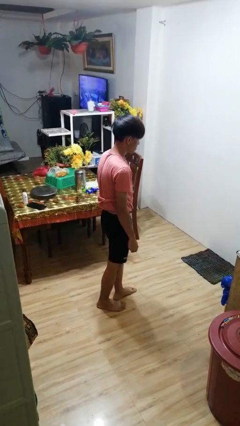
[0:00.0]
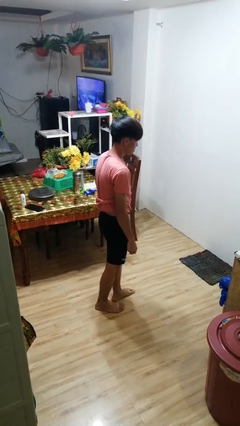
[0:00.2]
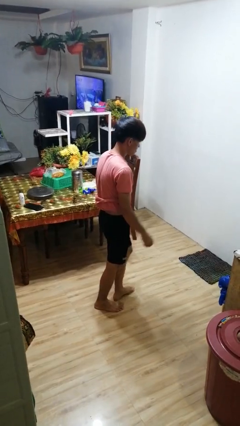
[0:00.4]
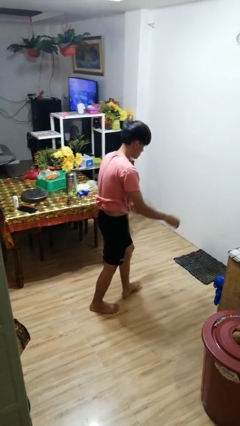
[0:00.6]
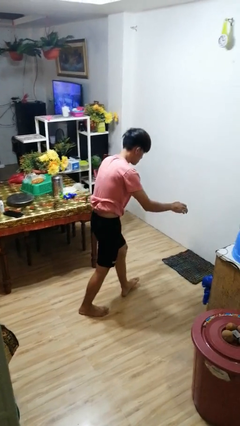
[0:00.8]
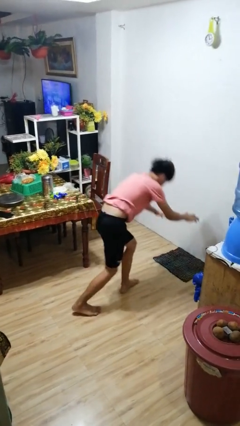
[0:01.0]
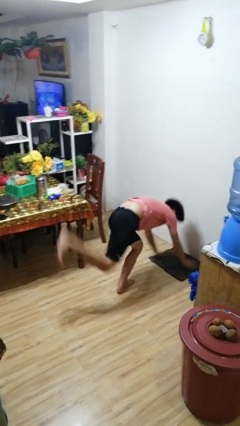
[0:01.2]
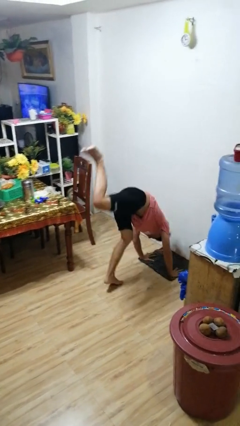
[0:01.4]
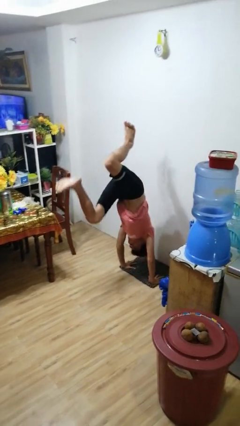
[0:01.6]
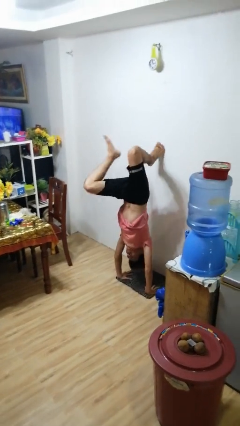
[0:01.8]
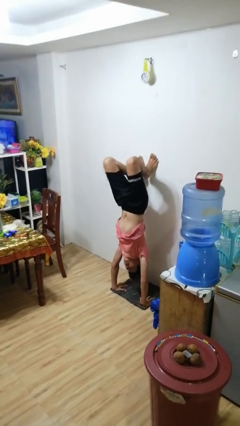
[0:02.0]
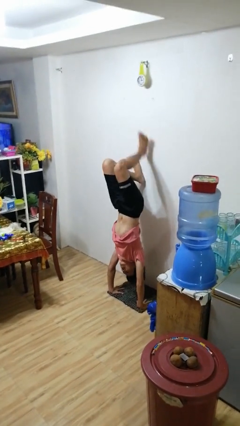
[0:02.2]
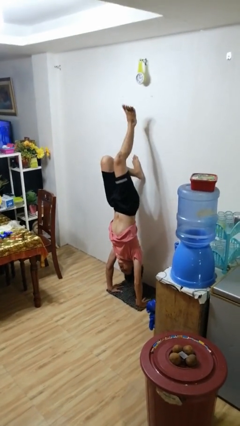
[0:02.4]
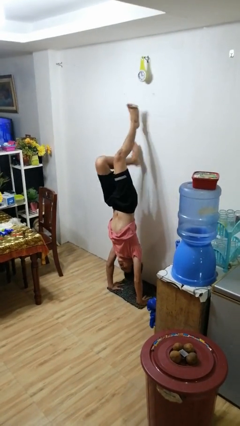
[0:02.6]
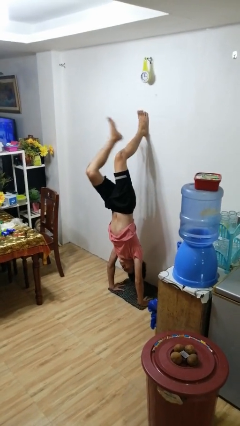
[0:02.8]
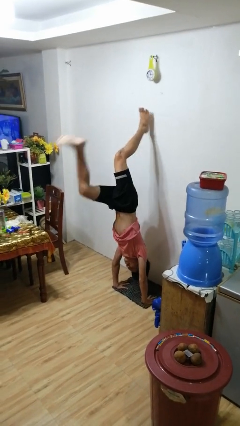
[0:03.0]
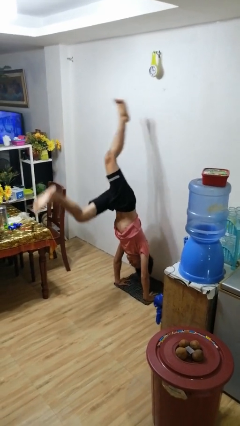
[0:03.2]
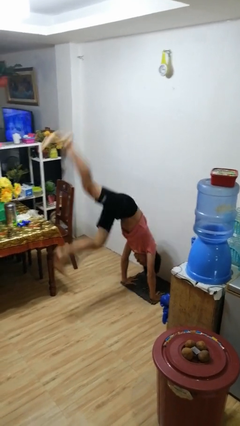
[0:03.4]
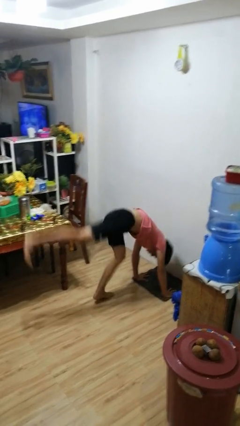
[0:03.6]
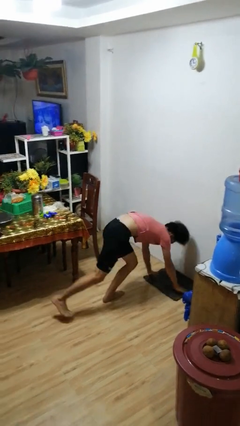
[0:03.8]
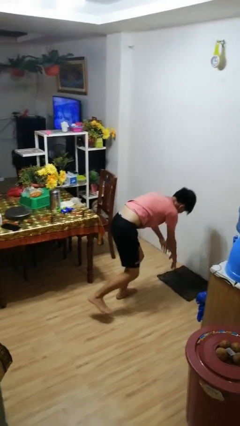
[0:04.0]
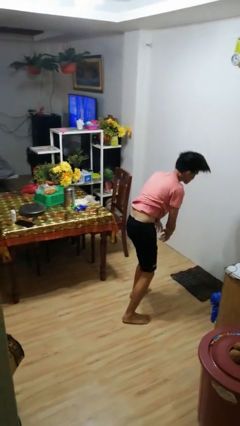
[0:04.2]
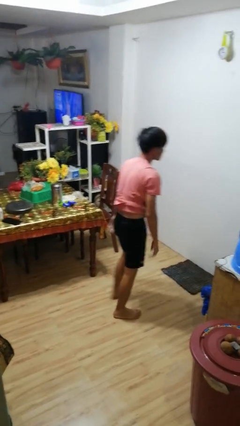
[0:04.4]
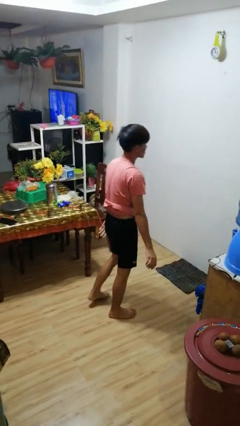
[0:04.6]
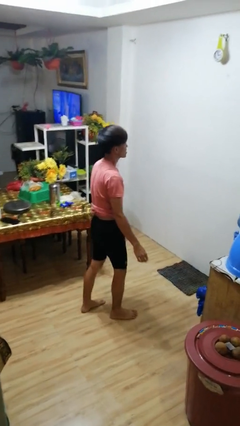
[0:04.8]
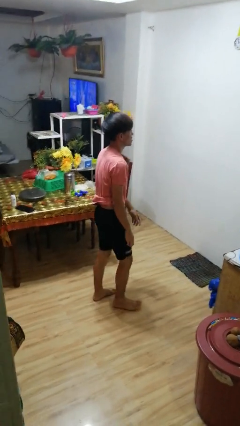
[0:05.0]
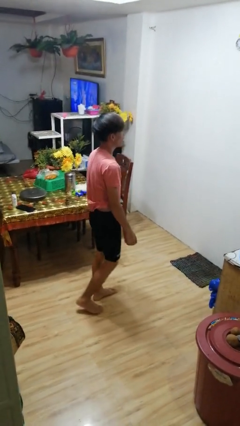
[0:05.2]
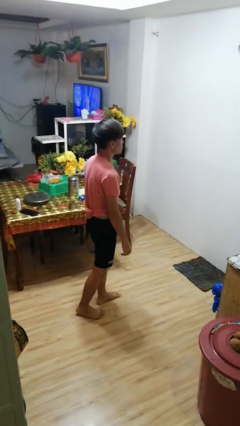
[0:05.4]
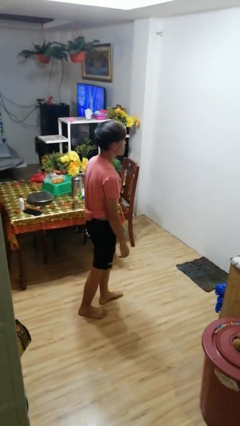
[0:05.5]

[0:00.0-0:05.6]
person handstand

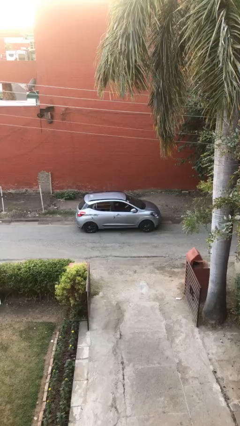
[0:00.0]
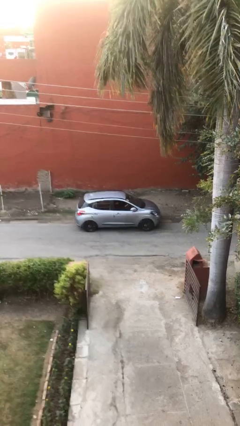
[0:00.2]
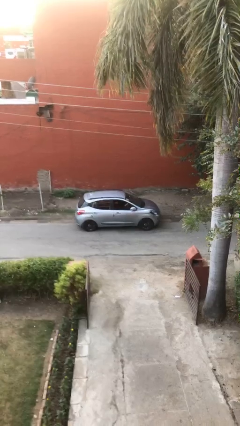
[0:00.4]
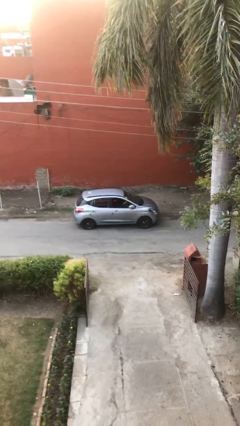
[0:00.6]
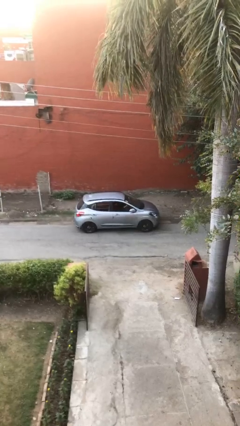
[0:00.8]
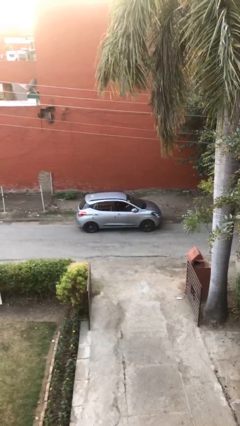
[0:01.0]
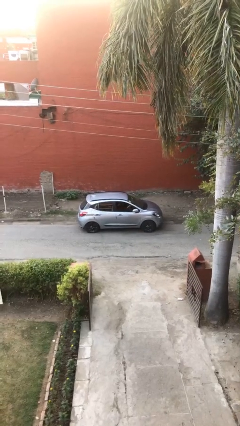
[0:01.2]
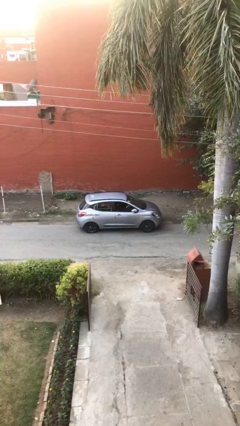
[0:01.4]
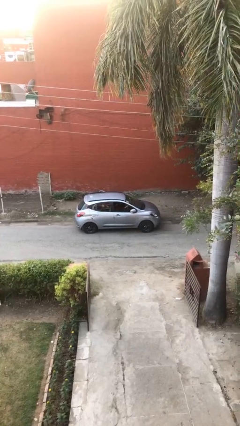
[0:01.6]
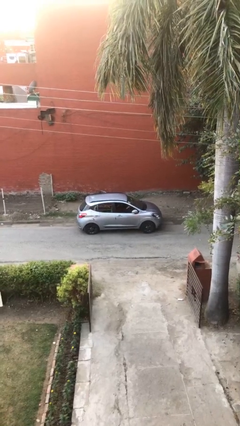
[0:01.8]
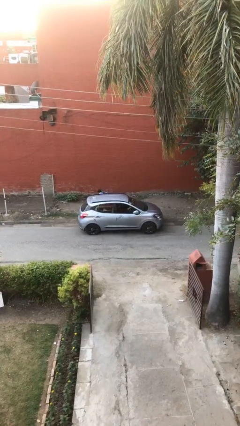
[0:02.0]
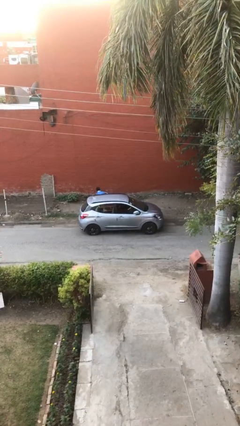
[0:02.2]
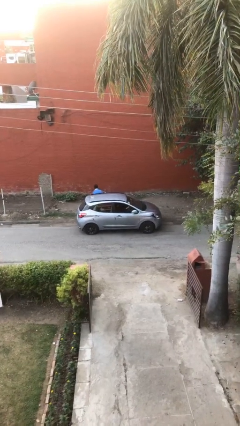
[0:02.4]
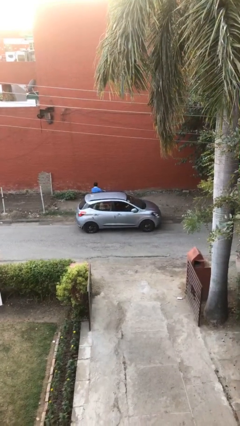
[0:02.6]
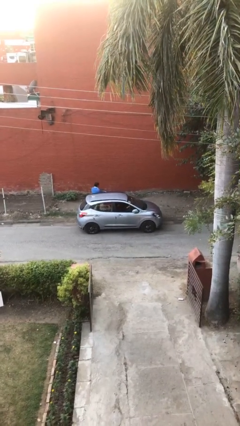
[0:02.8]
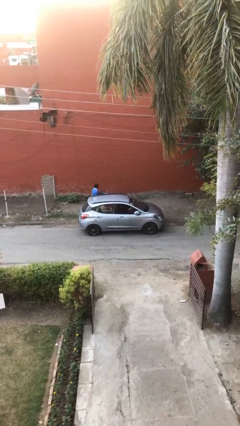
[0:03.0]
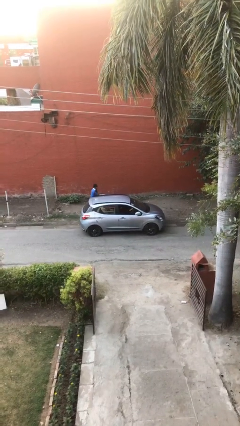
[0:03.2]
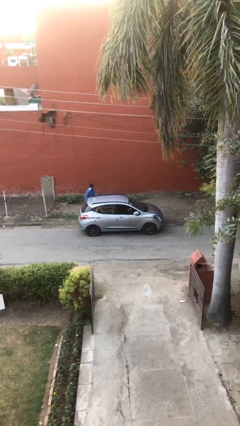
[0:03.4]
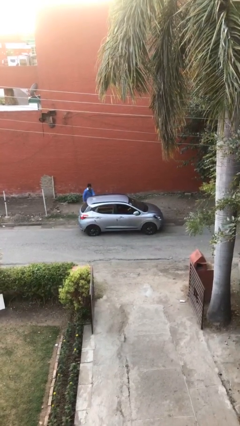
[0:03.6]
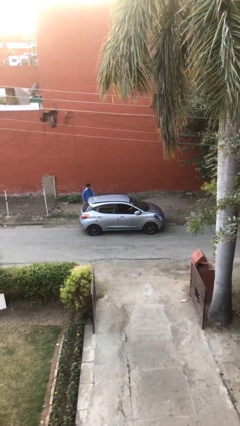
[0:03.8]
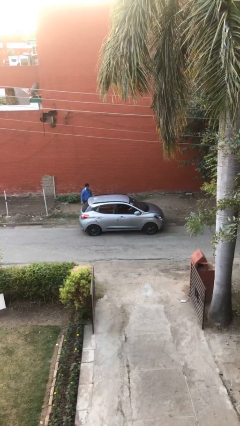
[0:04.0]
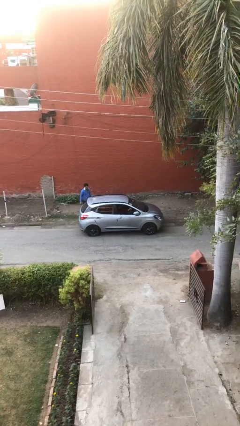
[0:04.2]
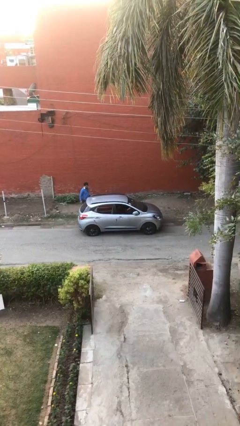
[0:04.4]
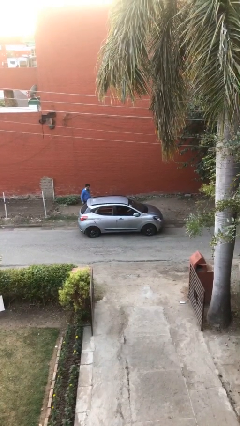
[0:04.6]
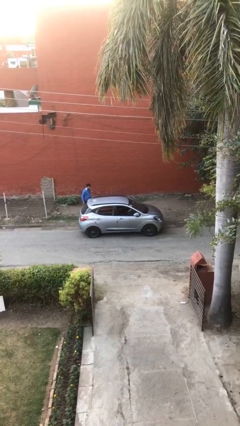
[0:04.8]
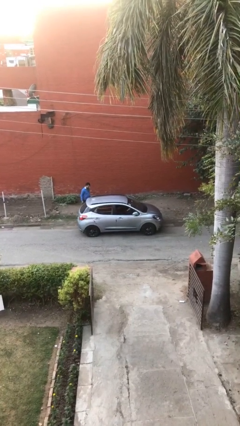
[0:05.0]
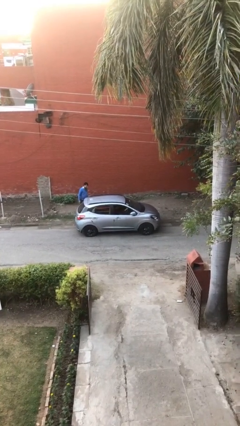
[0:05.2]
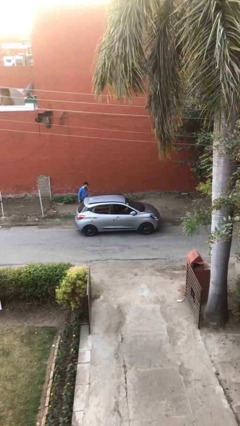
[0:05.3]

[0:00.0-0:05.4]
car drops off person

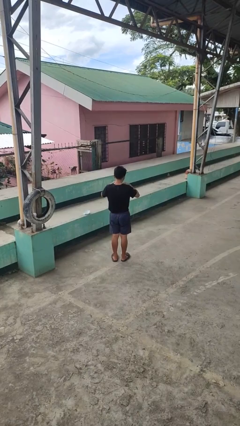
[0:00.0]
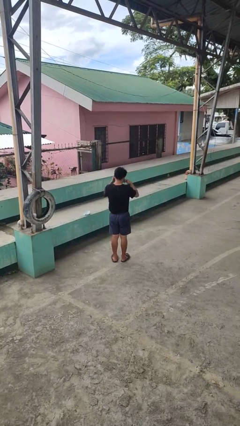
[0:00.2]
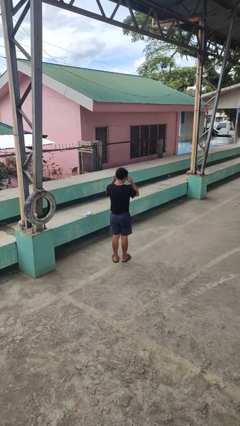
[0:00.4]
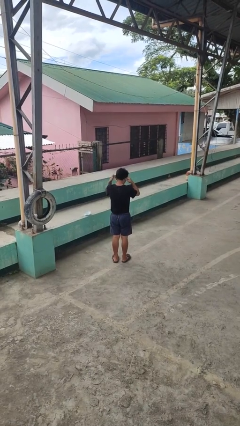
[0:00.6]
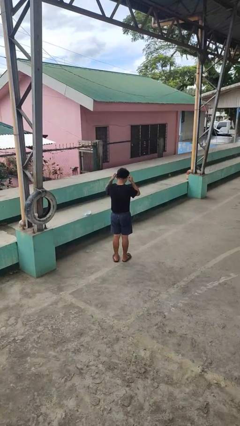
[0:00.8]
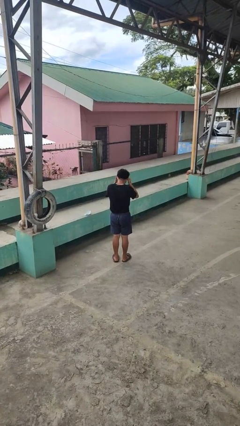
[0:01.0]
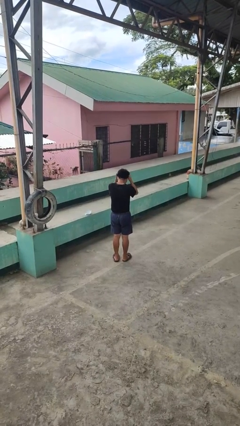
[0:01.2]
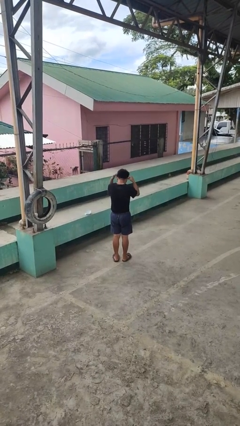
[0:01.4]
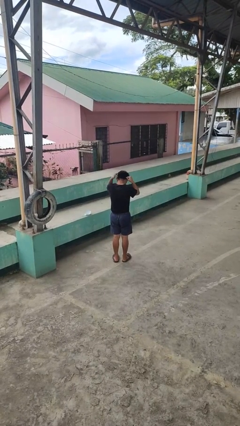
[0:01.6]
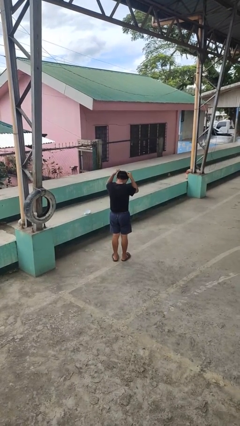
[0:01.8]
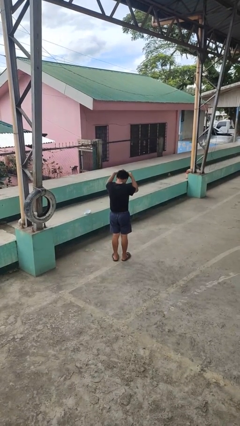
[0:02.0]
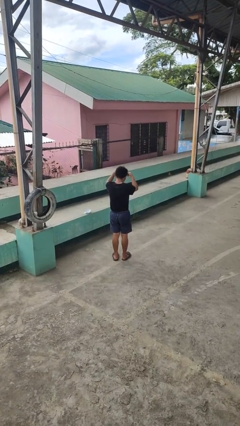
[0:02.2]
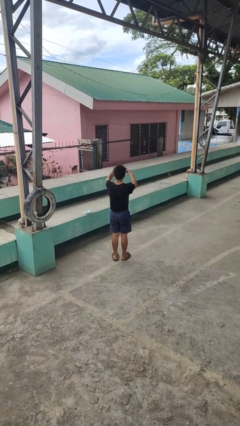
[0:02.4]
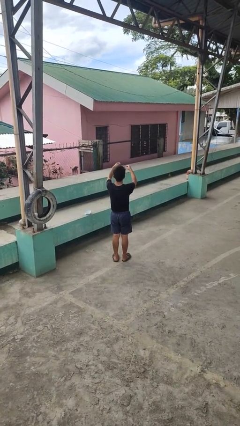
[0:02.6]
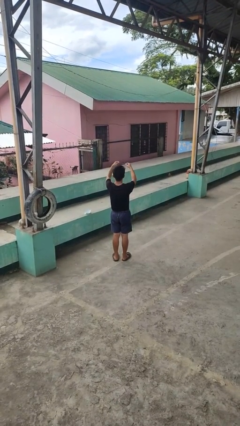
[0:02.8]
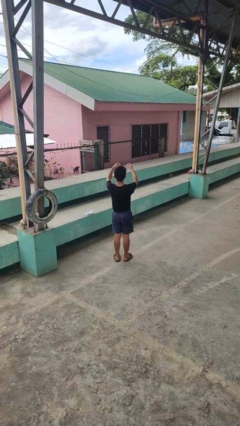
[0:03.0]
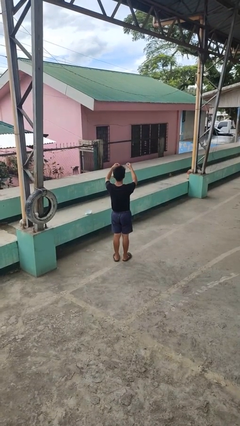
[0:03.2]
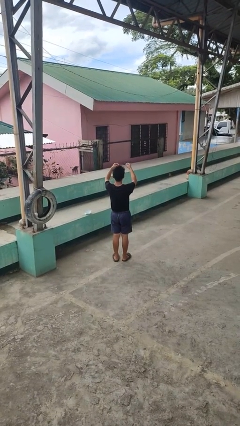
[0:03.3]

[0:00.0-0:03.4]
person takes off necklace

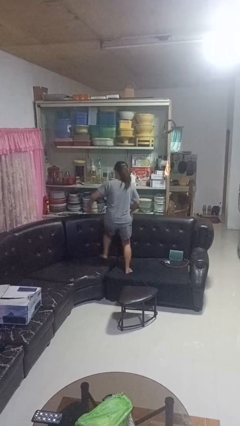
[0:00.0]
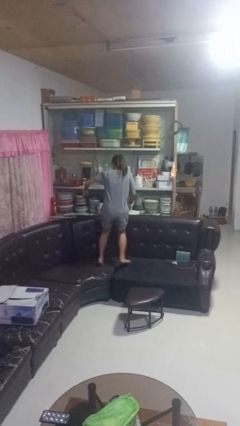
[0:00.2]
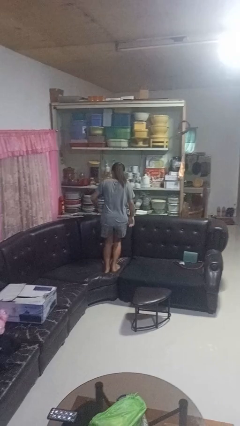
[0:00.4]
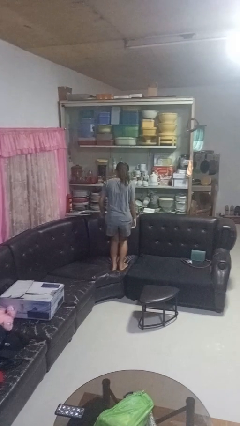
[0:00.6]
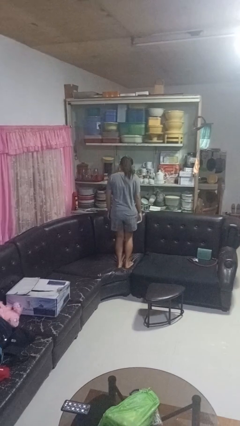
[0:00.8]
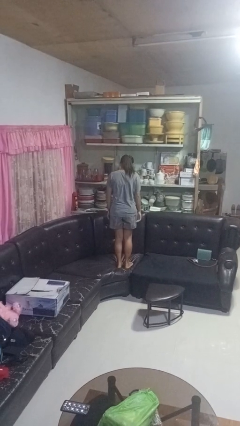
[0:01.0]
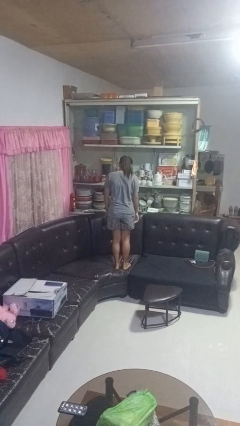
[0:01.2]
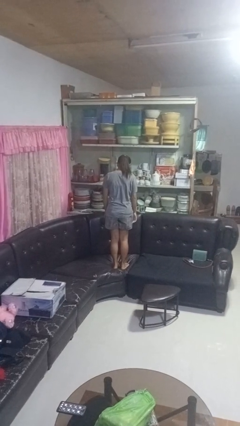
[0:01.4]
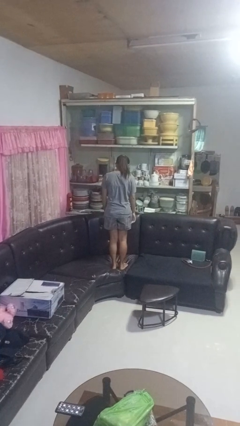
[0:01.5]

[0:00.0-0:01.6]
person jumps on couch

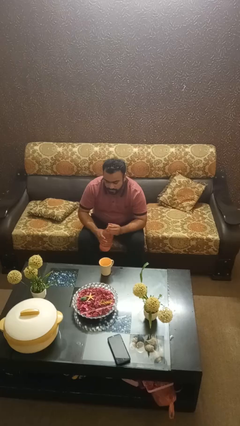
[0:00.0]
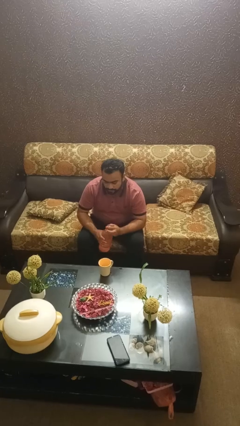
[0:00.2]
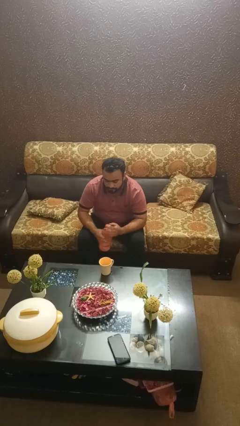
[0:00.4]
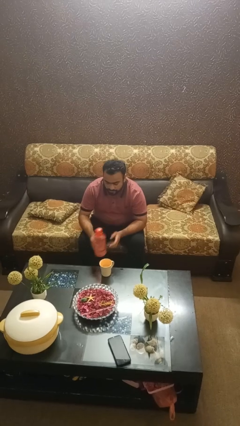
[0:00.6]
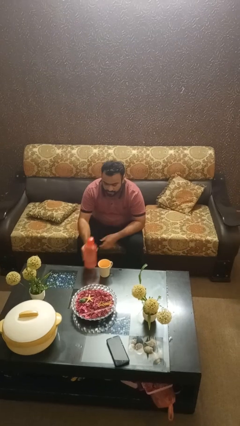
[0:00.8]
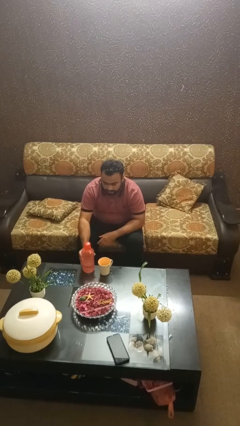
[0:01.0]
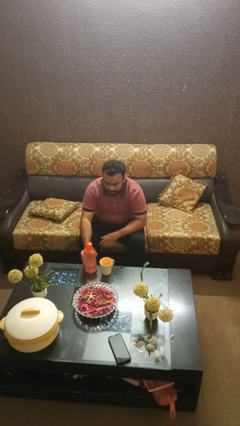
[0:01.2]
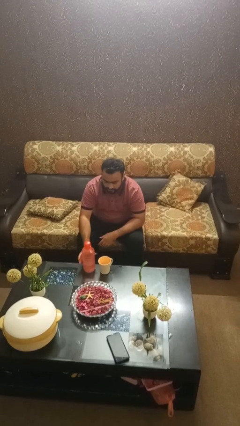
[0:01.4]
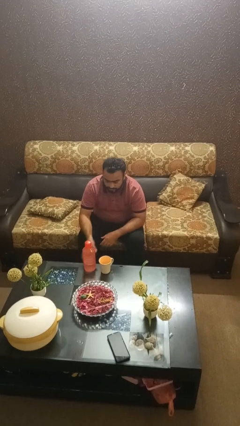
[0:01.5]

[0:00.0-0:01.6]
person screws lid to bottle

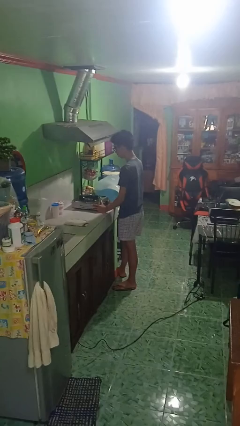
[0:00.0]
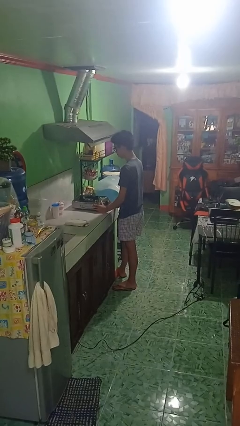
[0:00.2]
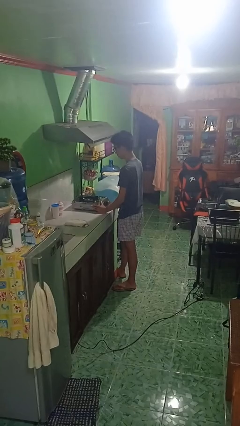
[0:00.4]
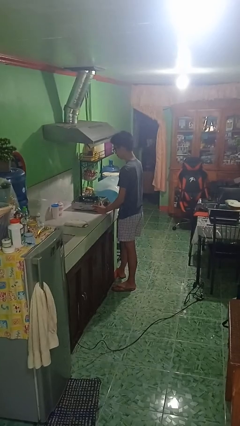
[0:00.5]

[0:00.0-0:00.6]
person turns off stovetop
